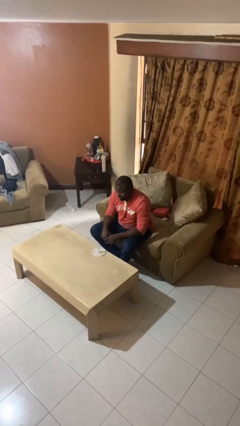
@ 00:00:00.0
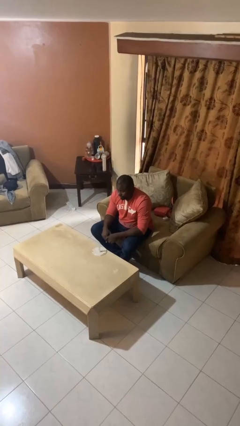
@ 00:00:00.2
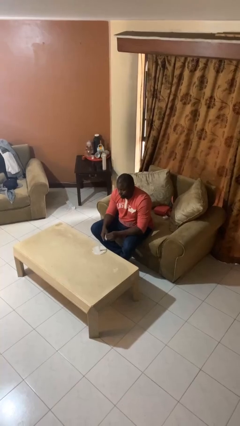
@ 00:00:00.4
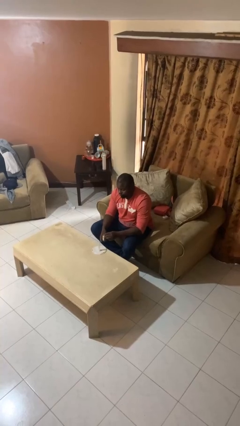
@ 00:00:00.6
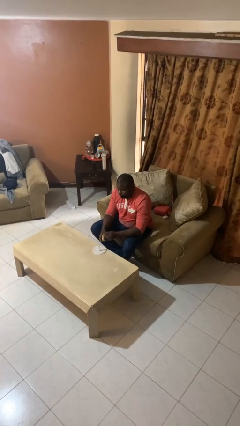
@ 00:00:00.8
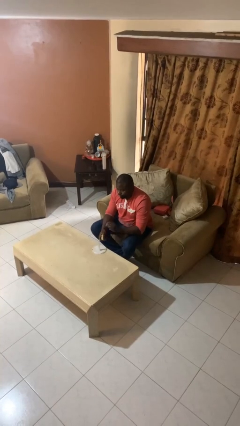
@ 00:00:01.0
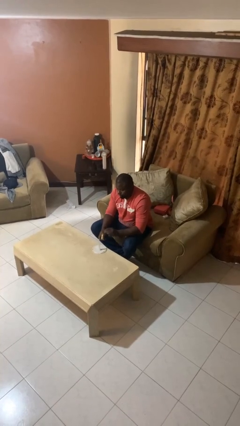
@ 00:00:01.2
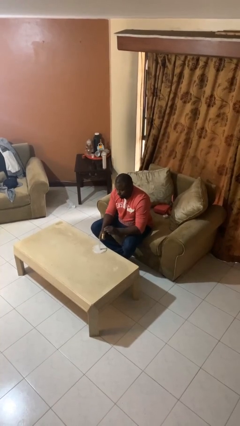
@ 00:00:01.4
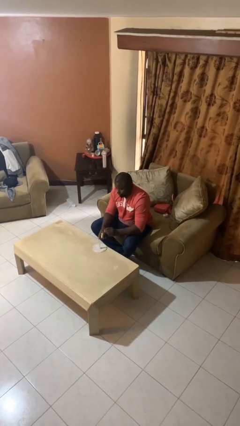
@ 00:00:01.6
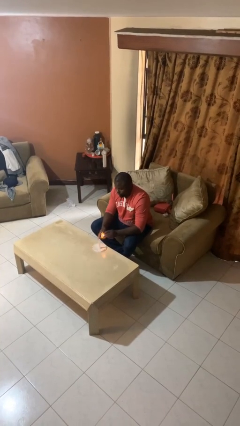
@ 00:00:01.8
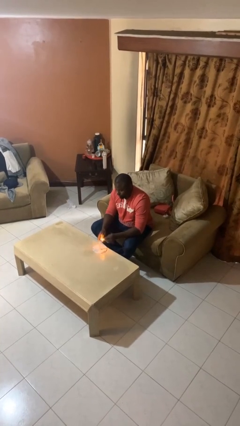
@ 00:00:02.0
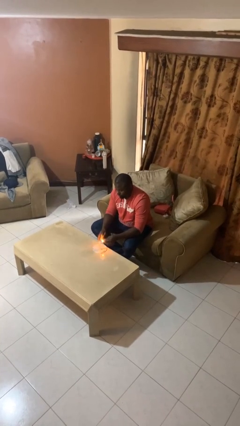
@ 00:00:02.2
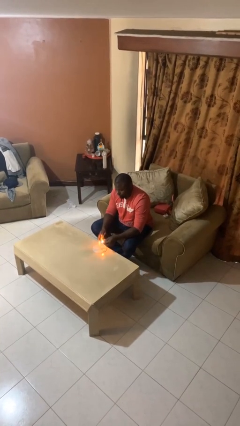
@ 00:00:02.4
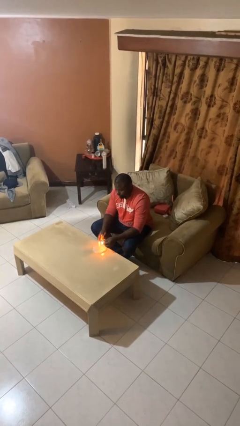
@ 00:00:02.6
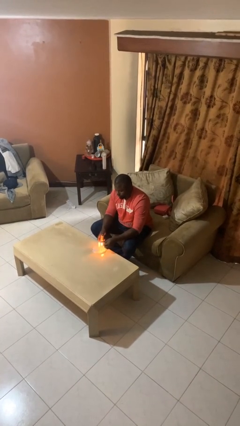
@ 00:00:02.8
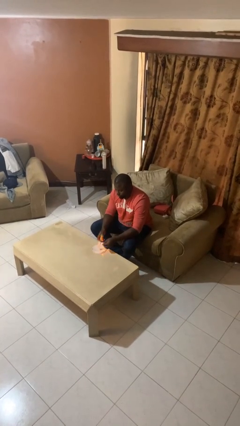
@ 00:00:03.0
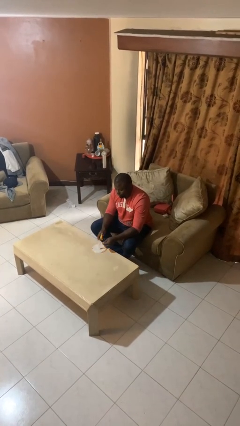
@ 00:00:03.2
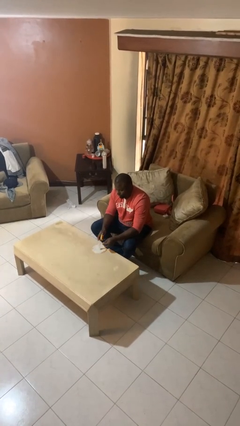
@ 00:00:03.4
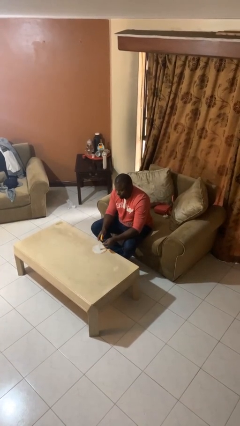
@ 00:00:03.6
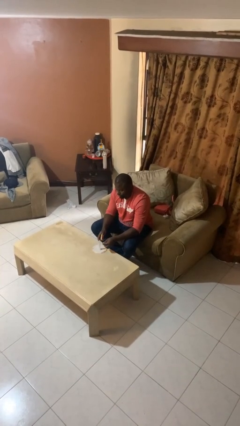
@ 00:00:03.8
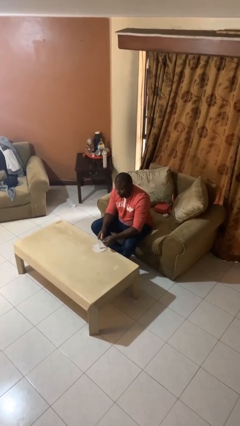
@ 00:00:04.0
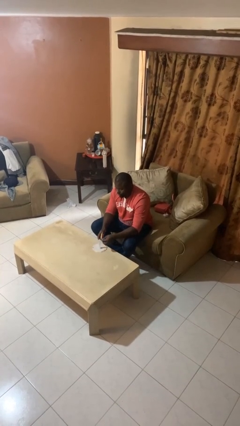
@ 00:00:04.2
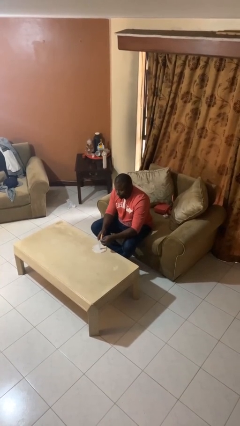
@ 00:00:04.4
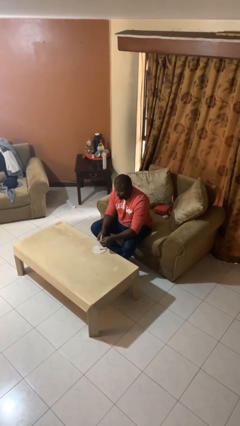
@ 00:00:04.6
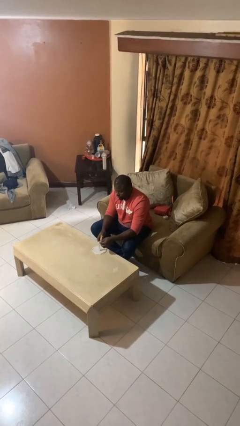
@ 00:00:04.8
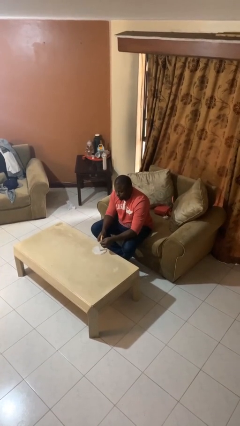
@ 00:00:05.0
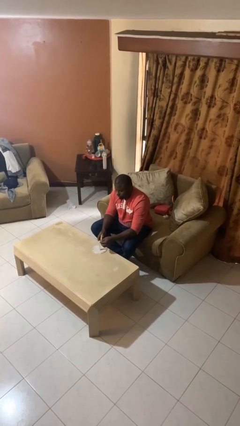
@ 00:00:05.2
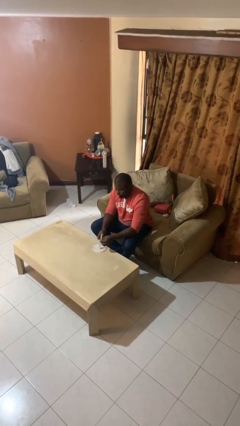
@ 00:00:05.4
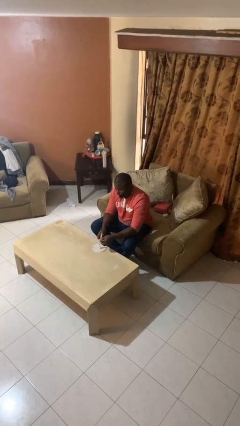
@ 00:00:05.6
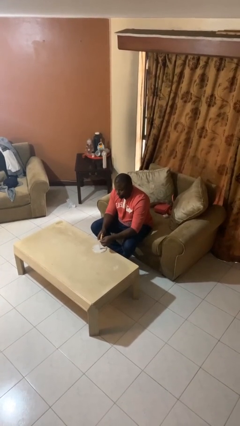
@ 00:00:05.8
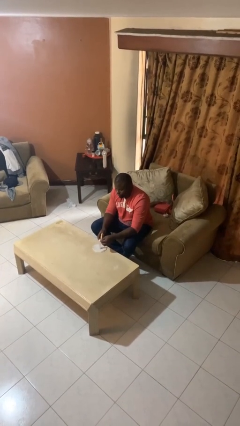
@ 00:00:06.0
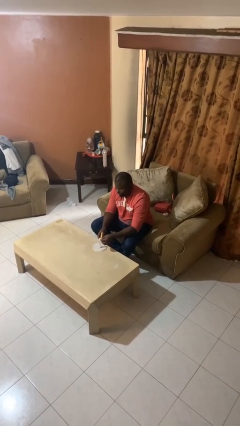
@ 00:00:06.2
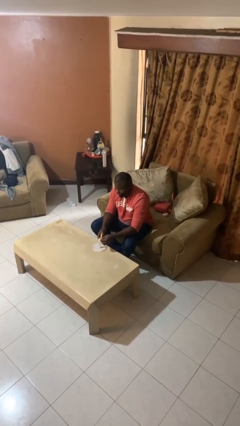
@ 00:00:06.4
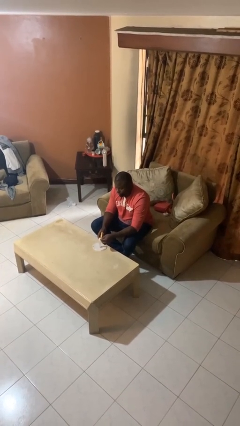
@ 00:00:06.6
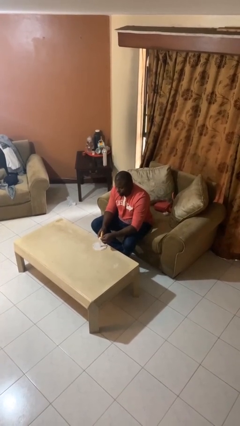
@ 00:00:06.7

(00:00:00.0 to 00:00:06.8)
person lights candle

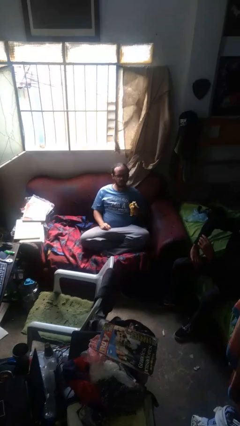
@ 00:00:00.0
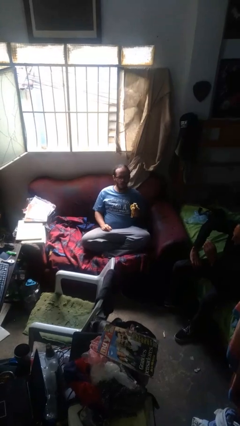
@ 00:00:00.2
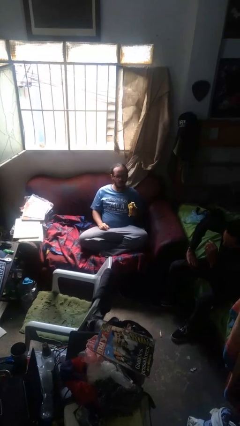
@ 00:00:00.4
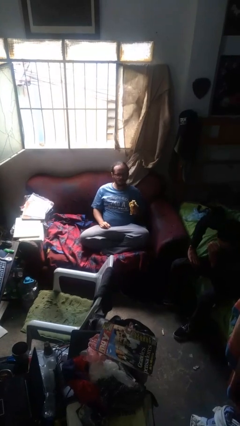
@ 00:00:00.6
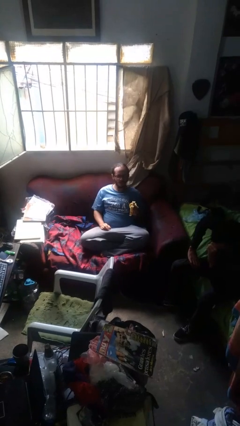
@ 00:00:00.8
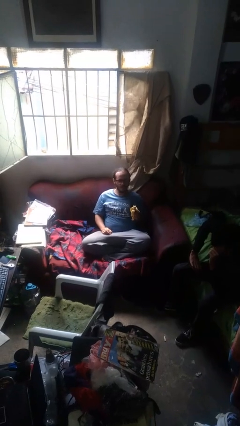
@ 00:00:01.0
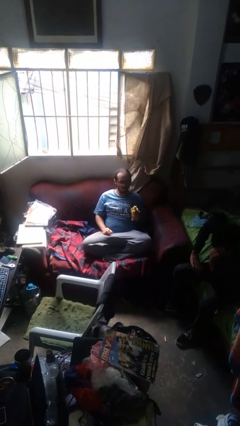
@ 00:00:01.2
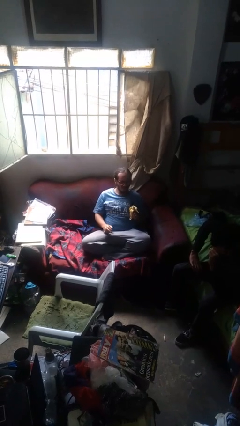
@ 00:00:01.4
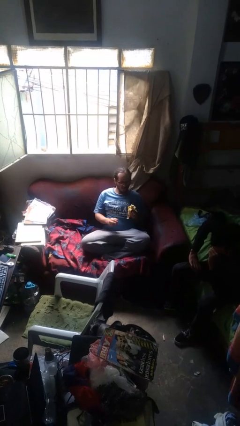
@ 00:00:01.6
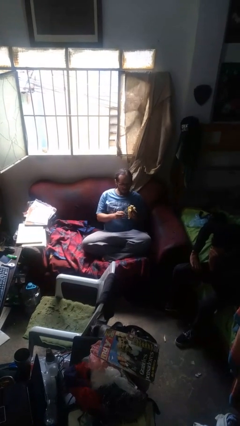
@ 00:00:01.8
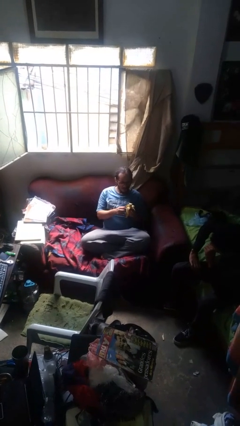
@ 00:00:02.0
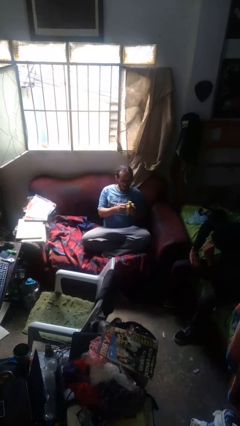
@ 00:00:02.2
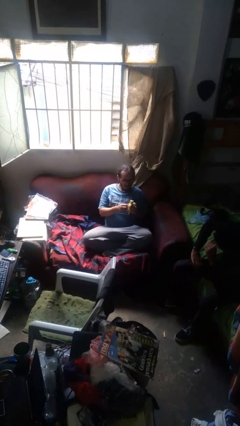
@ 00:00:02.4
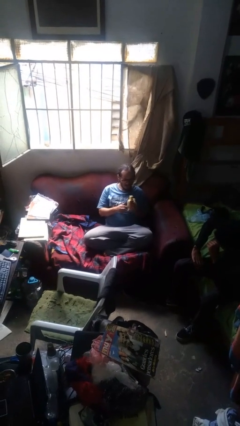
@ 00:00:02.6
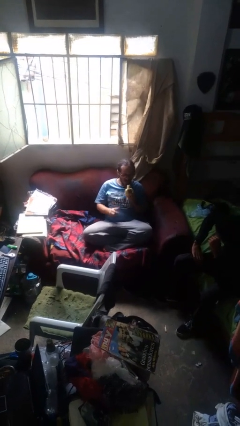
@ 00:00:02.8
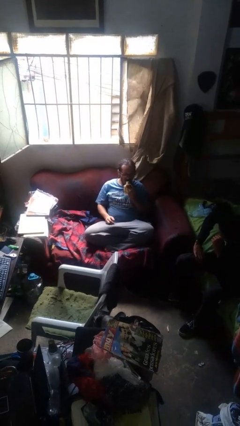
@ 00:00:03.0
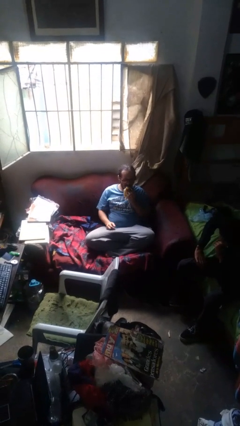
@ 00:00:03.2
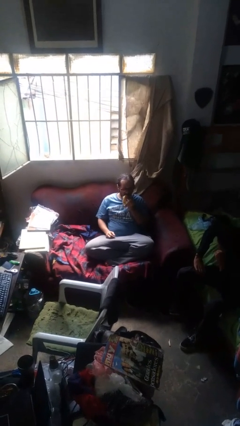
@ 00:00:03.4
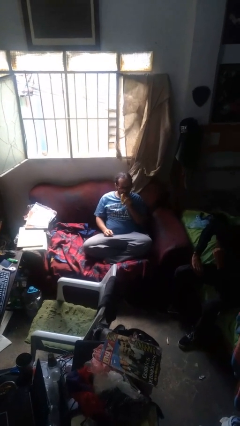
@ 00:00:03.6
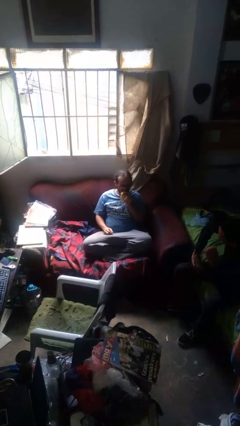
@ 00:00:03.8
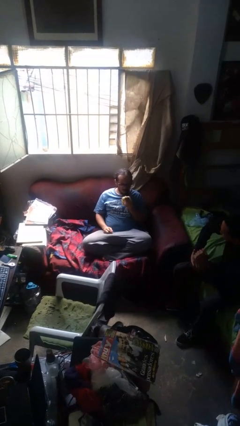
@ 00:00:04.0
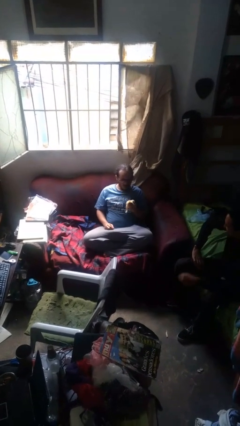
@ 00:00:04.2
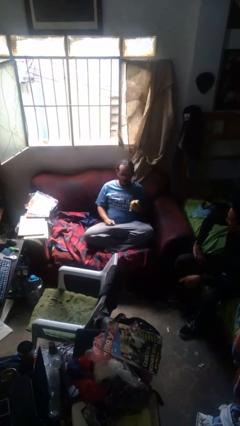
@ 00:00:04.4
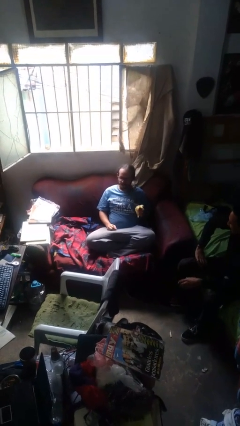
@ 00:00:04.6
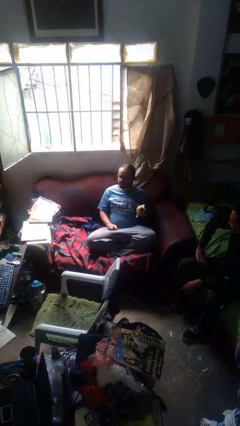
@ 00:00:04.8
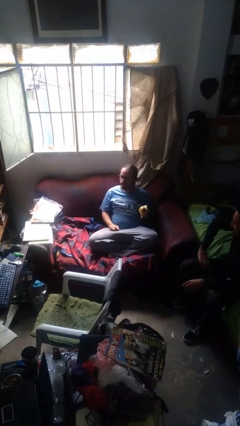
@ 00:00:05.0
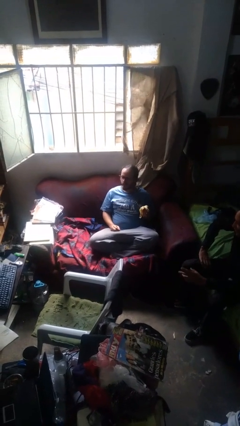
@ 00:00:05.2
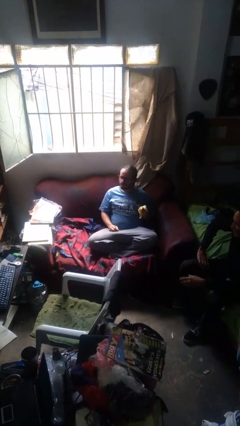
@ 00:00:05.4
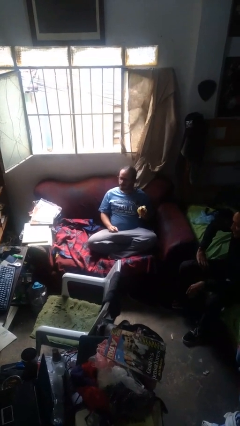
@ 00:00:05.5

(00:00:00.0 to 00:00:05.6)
person eats banana

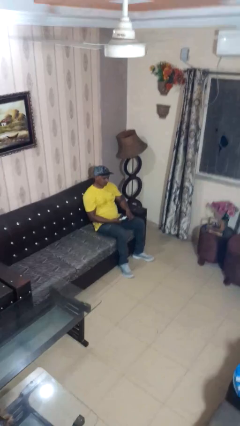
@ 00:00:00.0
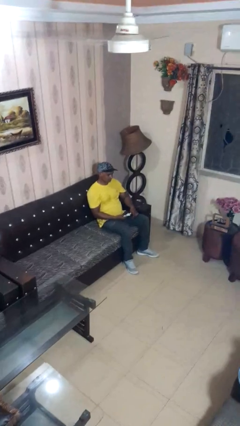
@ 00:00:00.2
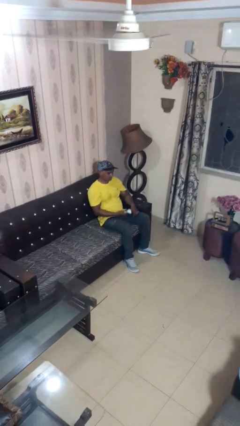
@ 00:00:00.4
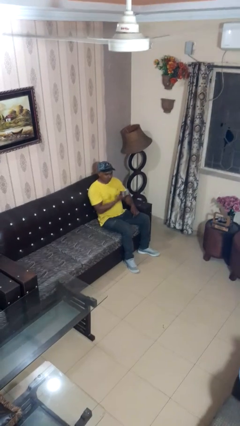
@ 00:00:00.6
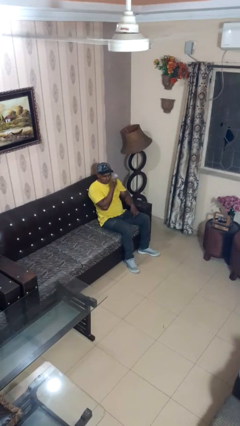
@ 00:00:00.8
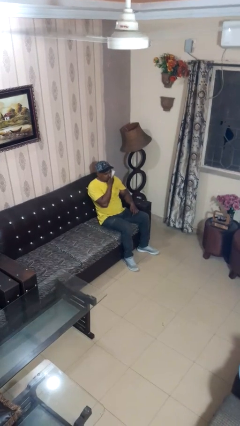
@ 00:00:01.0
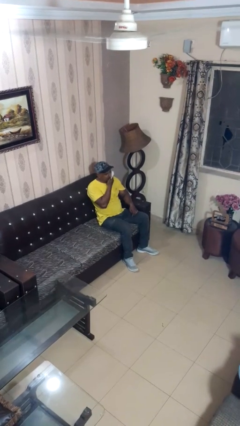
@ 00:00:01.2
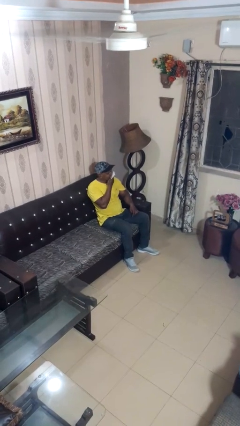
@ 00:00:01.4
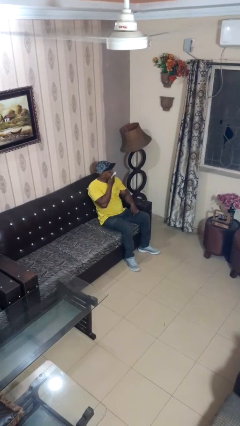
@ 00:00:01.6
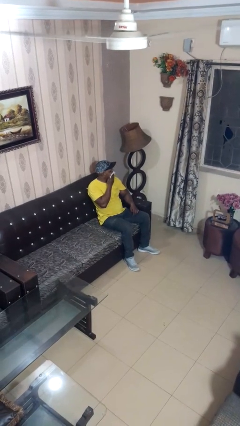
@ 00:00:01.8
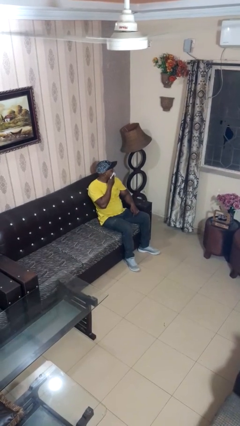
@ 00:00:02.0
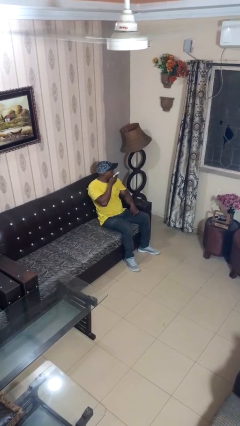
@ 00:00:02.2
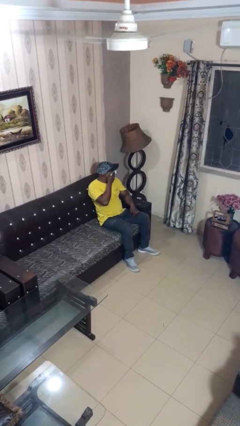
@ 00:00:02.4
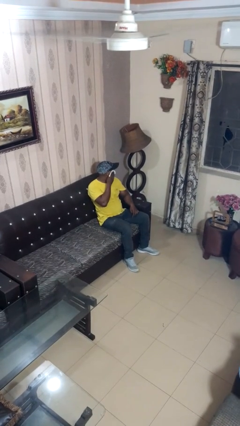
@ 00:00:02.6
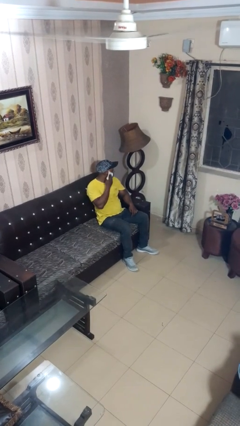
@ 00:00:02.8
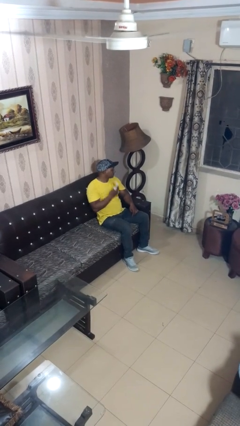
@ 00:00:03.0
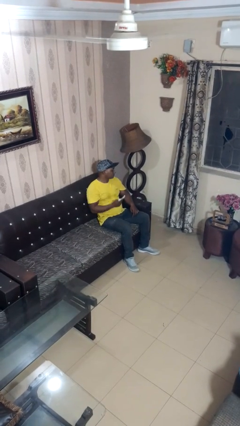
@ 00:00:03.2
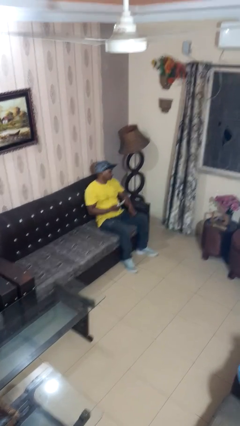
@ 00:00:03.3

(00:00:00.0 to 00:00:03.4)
person wipes mouth with napkin

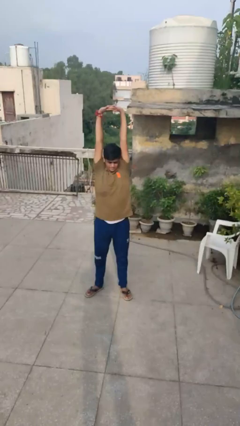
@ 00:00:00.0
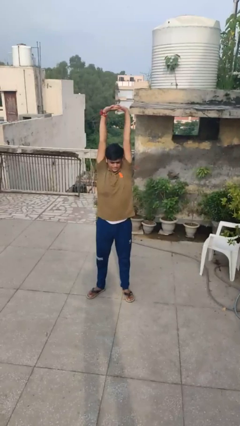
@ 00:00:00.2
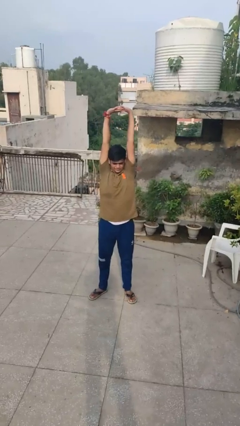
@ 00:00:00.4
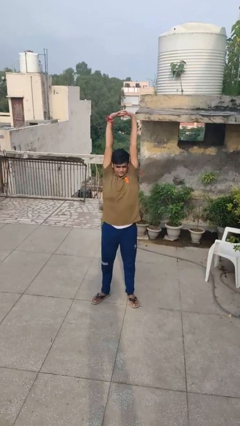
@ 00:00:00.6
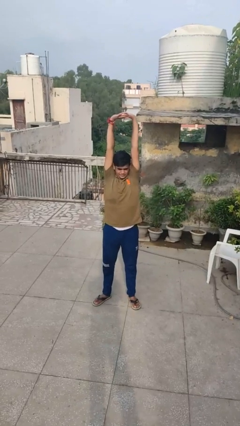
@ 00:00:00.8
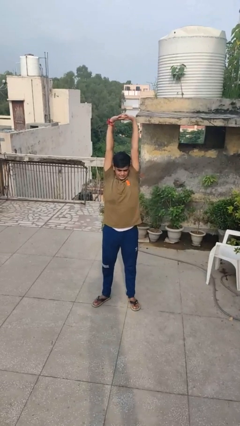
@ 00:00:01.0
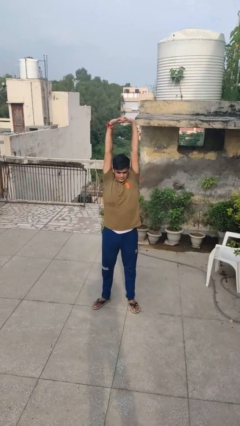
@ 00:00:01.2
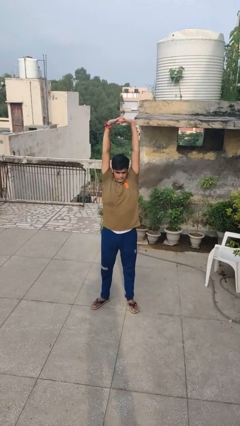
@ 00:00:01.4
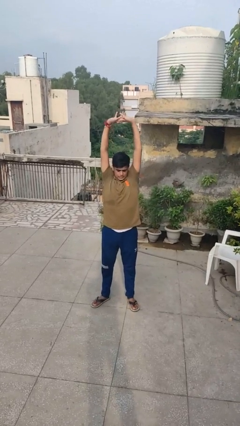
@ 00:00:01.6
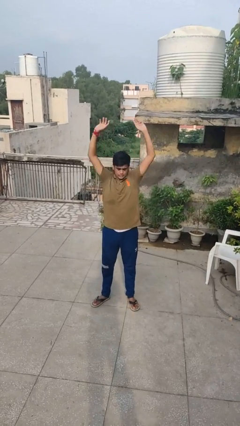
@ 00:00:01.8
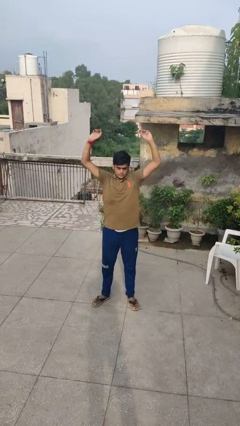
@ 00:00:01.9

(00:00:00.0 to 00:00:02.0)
person stretches arms over head
